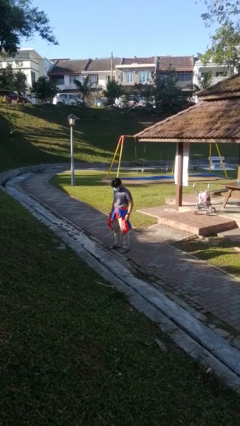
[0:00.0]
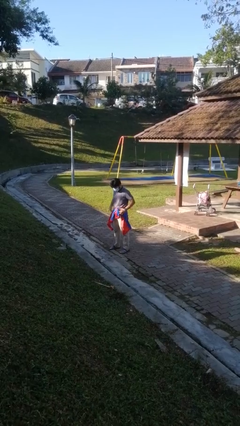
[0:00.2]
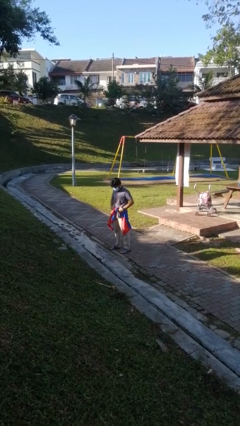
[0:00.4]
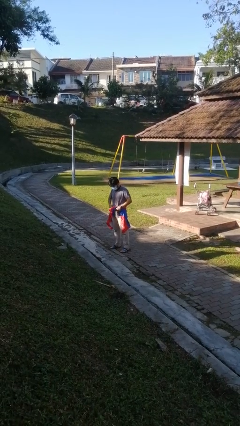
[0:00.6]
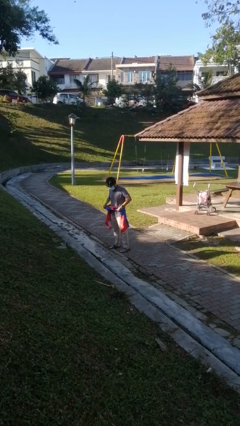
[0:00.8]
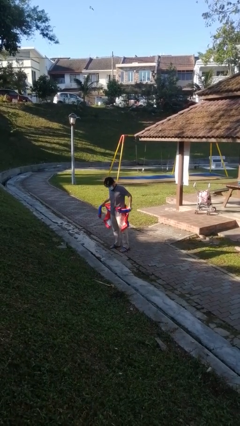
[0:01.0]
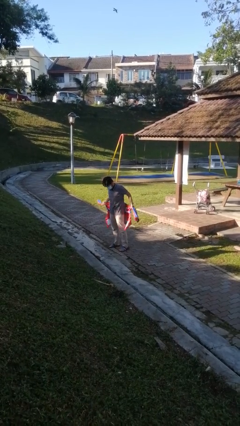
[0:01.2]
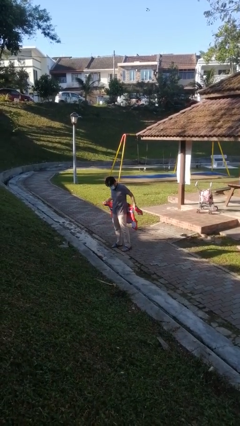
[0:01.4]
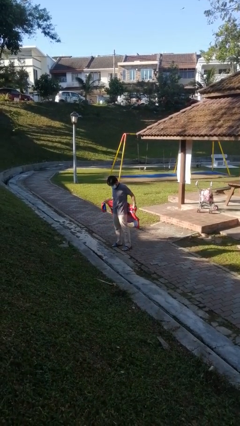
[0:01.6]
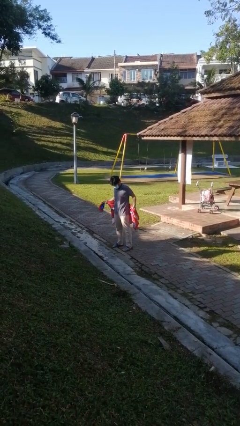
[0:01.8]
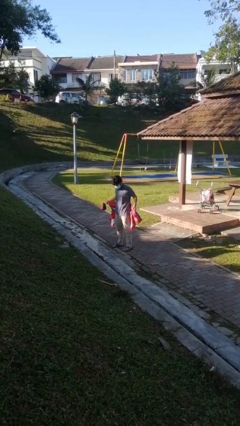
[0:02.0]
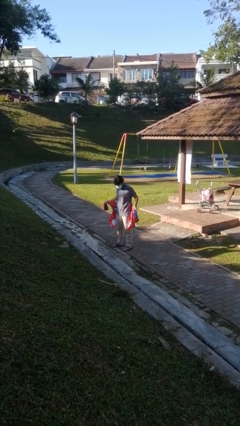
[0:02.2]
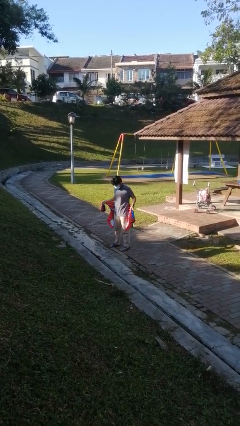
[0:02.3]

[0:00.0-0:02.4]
person unties jacket around waist

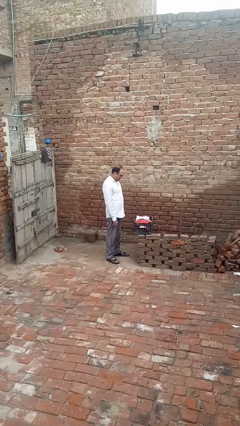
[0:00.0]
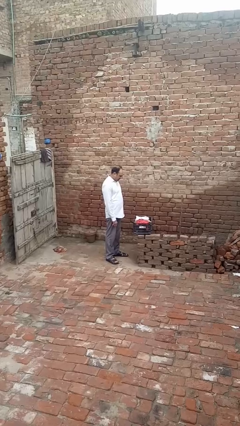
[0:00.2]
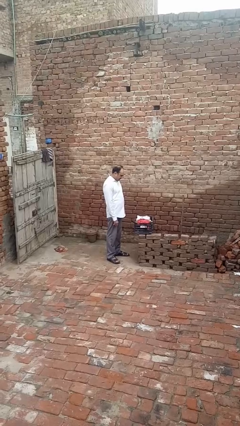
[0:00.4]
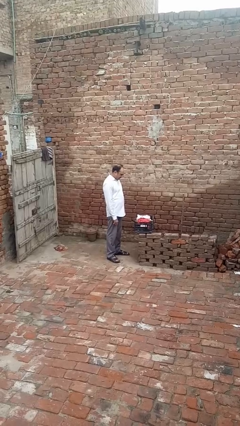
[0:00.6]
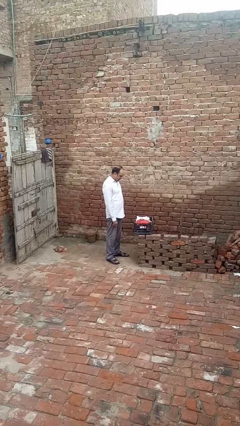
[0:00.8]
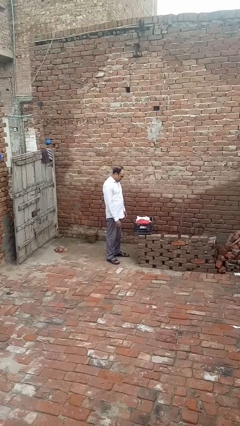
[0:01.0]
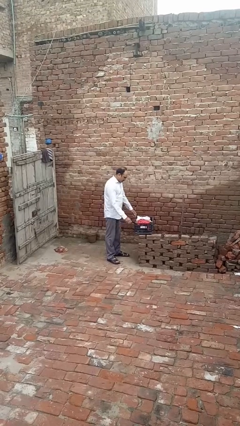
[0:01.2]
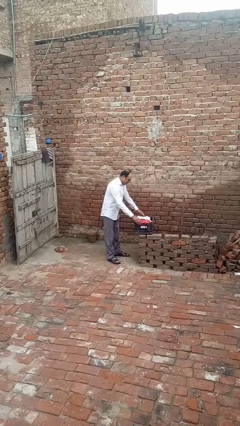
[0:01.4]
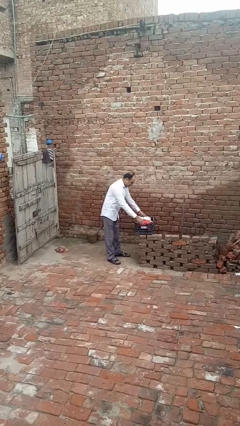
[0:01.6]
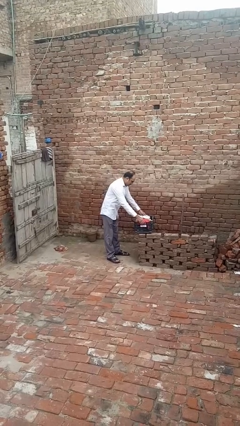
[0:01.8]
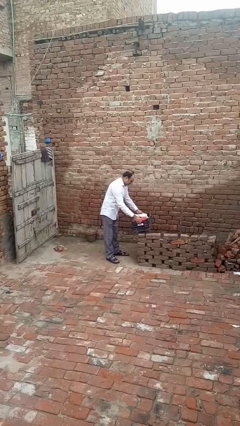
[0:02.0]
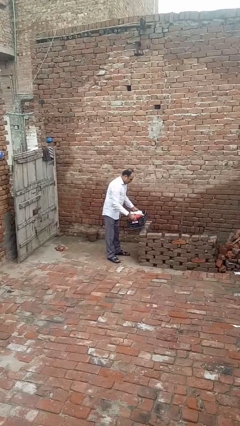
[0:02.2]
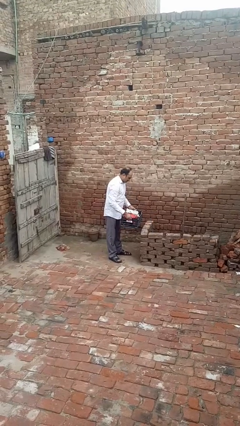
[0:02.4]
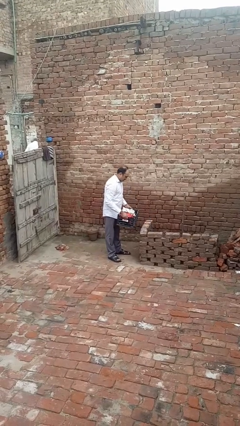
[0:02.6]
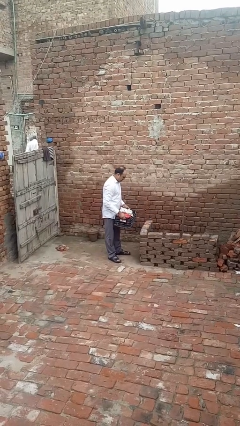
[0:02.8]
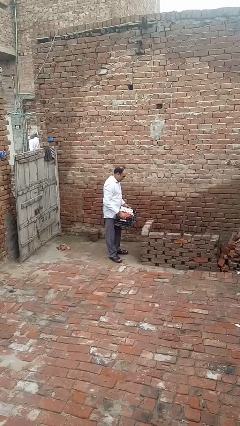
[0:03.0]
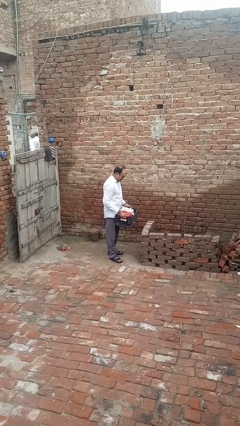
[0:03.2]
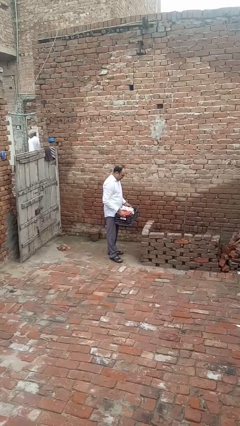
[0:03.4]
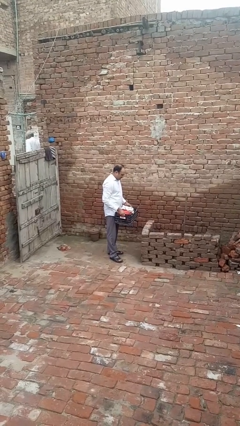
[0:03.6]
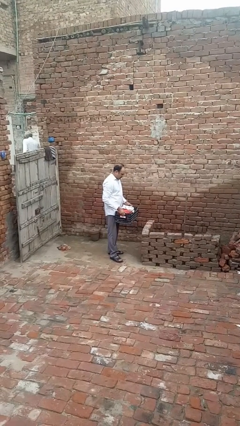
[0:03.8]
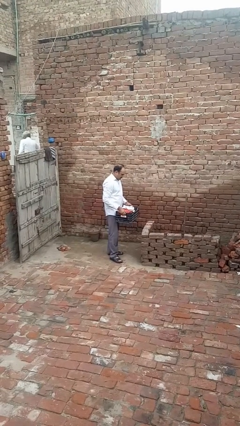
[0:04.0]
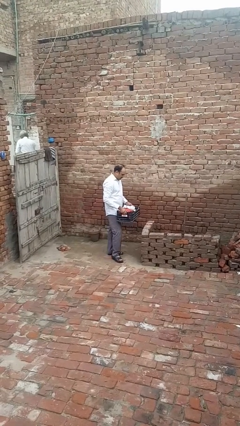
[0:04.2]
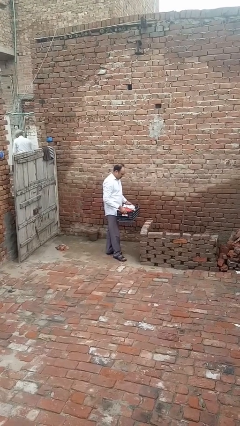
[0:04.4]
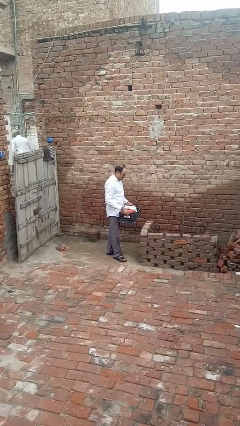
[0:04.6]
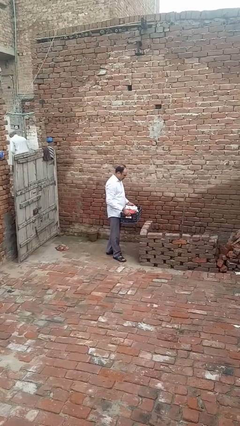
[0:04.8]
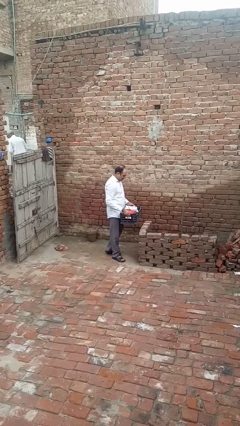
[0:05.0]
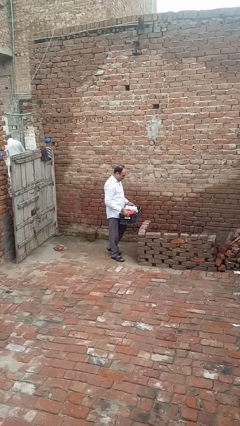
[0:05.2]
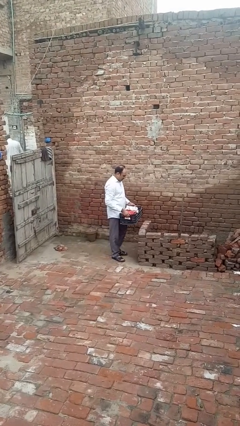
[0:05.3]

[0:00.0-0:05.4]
person carries laundry basket

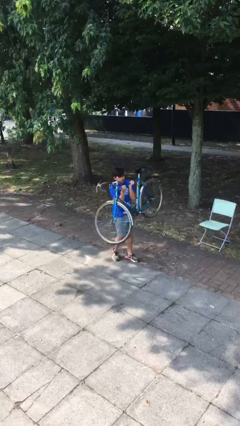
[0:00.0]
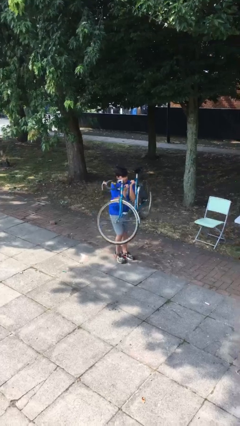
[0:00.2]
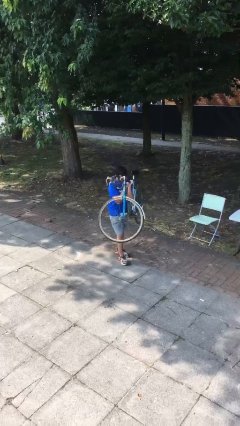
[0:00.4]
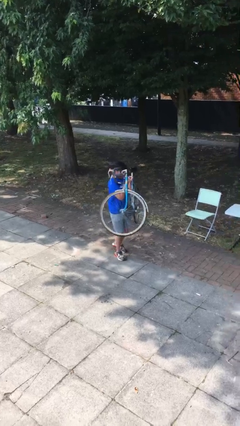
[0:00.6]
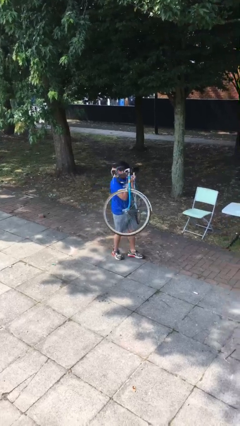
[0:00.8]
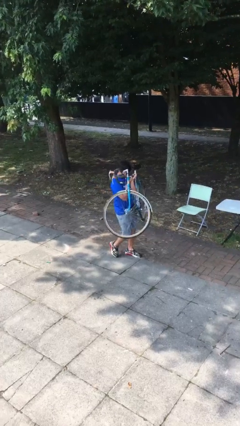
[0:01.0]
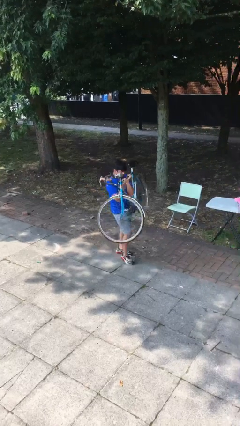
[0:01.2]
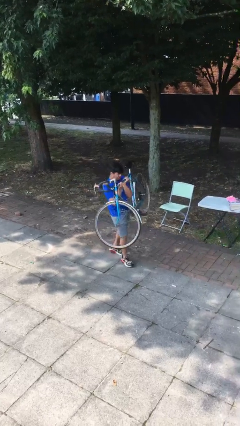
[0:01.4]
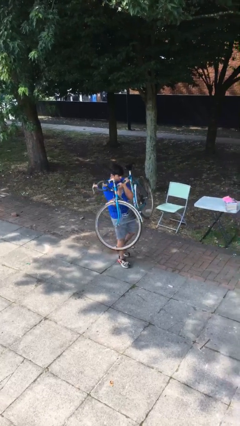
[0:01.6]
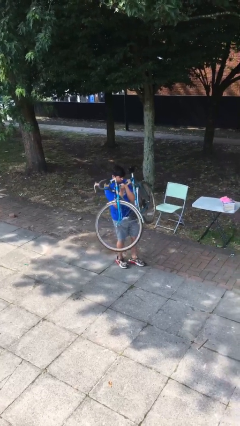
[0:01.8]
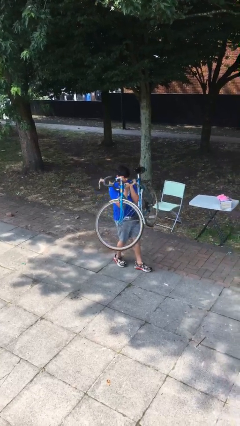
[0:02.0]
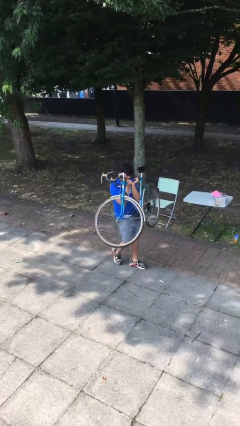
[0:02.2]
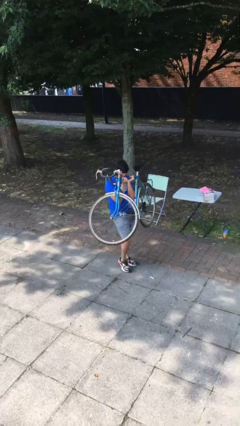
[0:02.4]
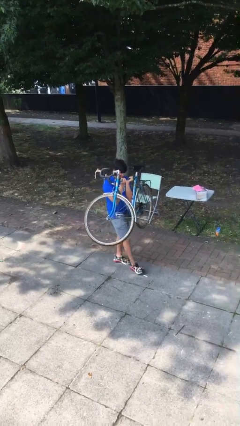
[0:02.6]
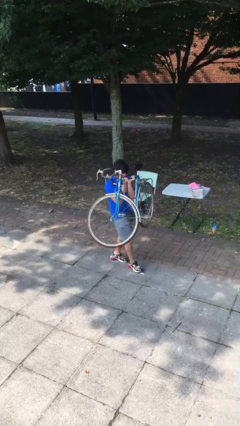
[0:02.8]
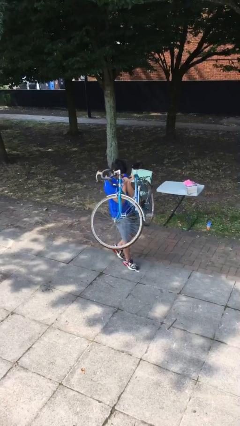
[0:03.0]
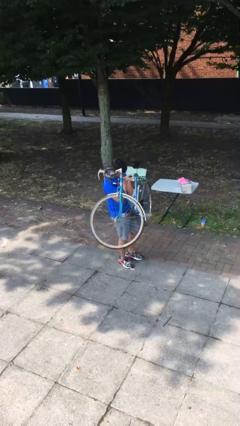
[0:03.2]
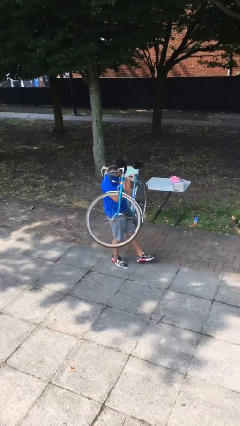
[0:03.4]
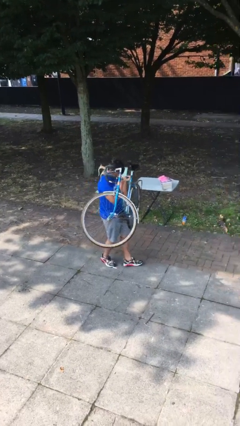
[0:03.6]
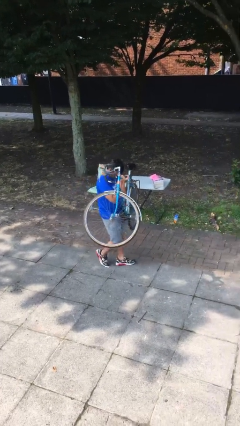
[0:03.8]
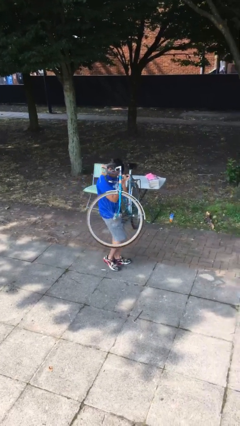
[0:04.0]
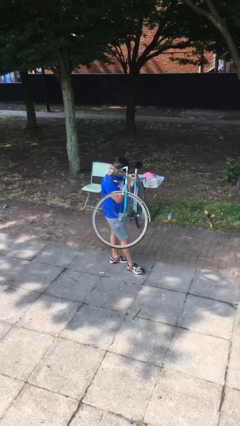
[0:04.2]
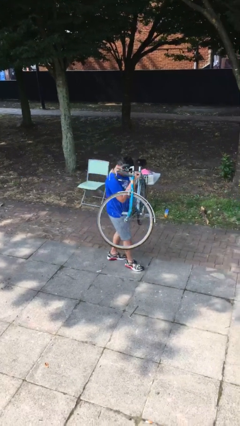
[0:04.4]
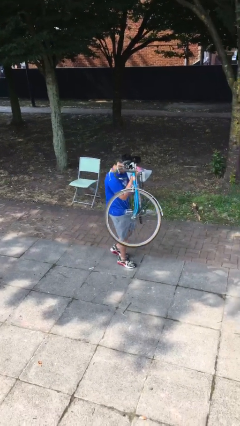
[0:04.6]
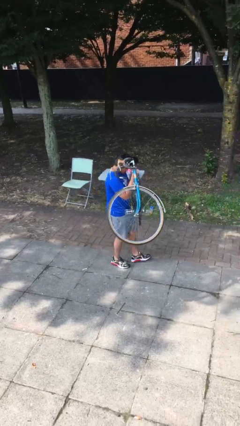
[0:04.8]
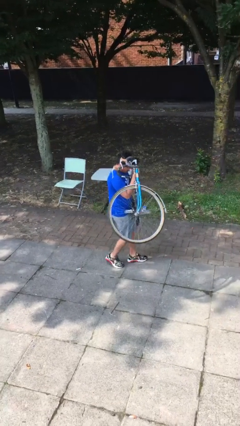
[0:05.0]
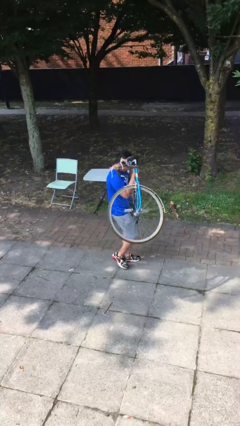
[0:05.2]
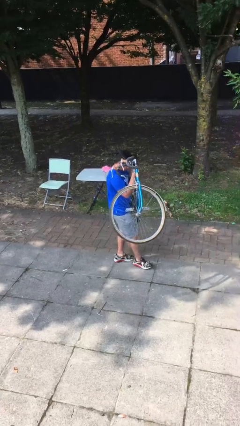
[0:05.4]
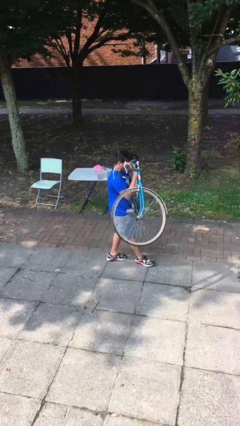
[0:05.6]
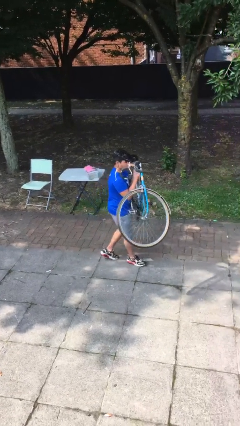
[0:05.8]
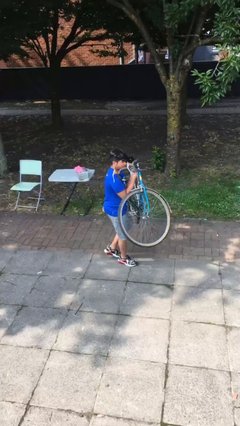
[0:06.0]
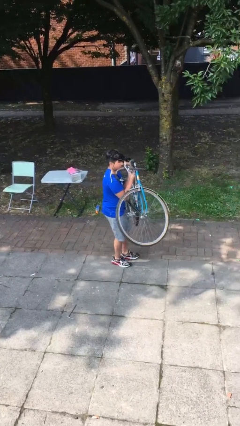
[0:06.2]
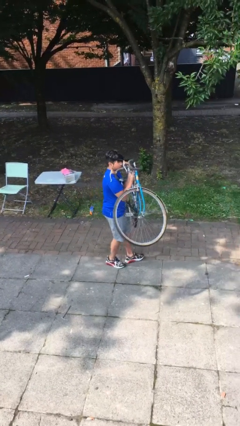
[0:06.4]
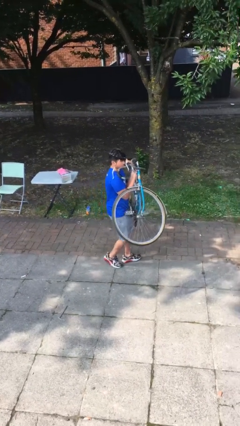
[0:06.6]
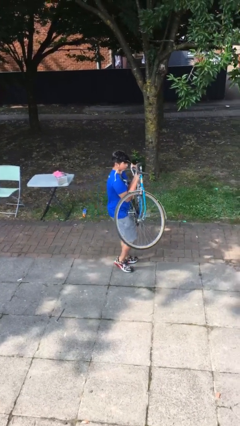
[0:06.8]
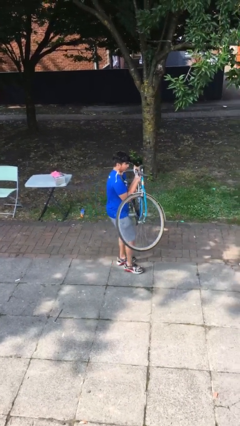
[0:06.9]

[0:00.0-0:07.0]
person carries heavy object

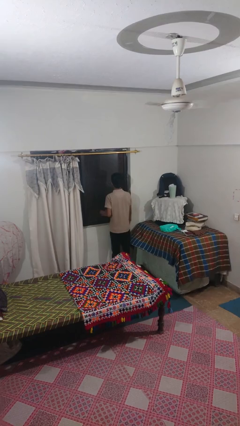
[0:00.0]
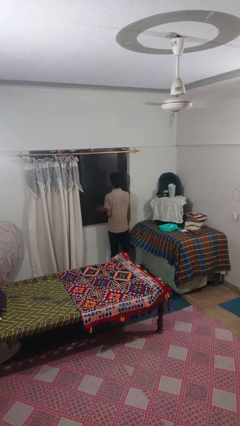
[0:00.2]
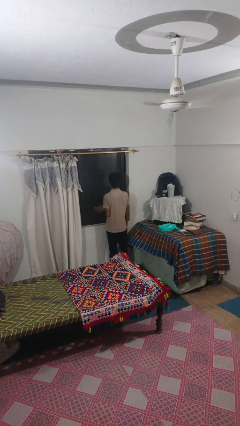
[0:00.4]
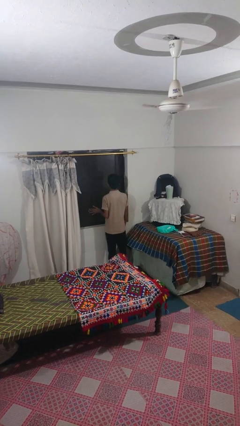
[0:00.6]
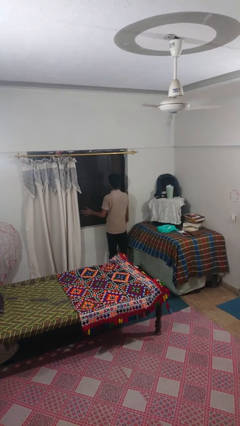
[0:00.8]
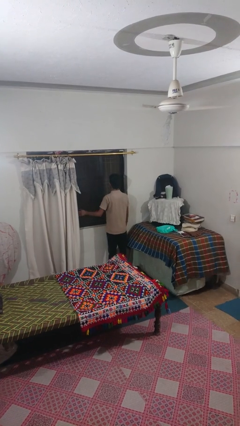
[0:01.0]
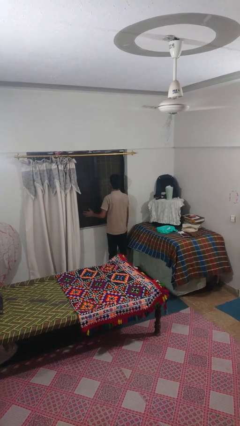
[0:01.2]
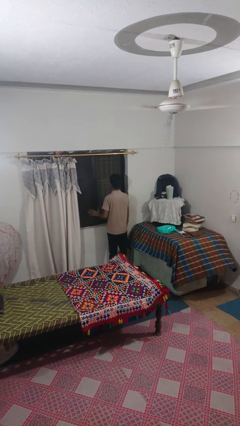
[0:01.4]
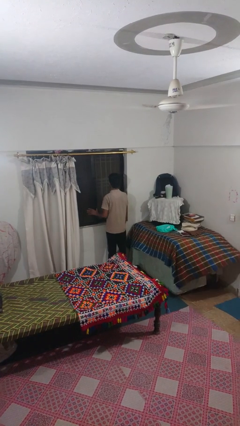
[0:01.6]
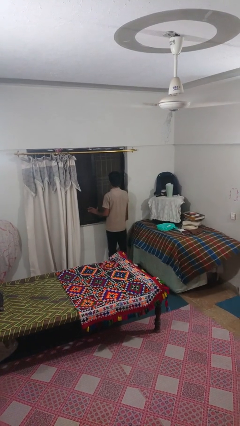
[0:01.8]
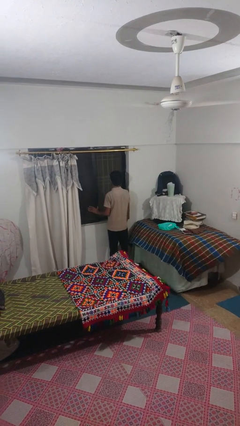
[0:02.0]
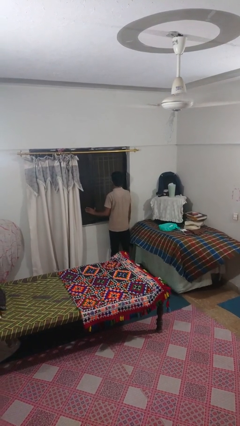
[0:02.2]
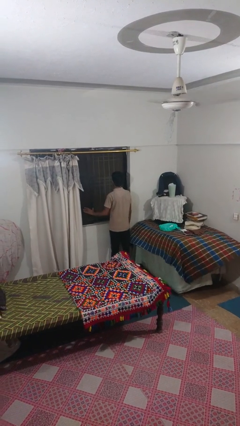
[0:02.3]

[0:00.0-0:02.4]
person opens sliding door

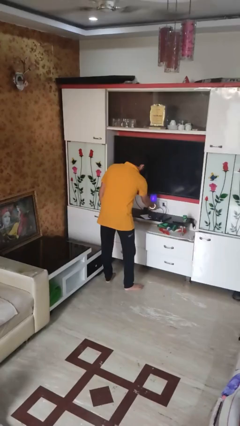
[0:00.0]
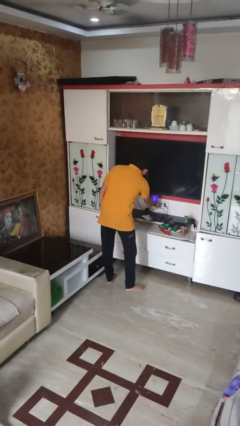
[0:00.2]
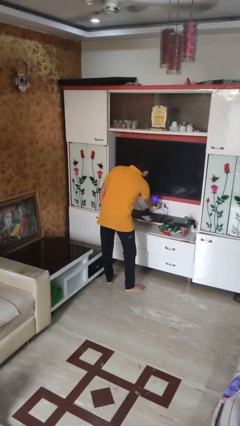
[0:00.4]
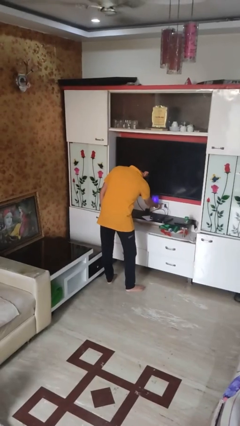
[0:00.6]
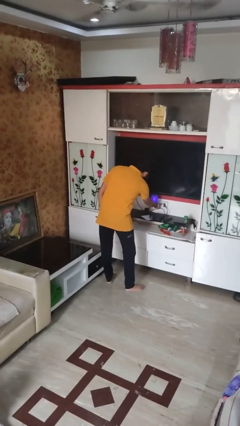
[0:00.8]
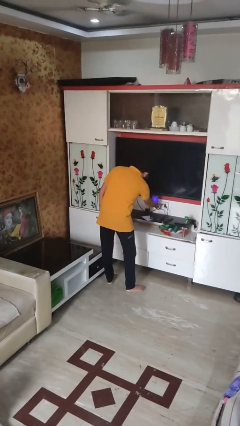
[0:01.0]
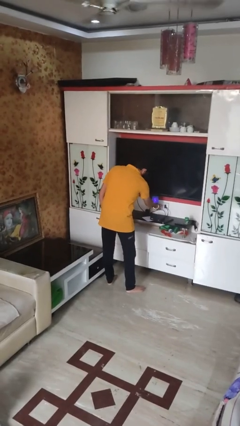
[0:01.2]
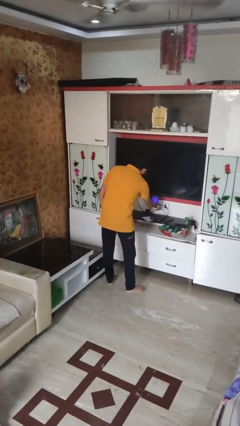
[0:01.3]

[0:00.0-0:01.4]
person turns off lamp
